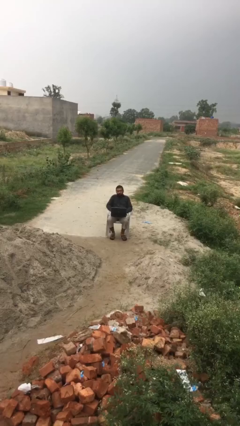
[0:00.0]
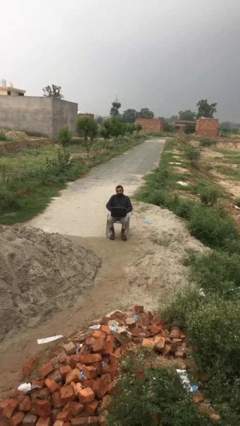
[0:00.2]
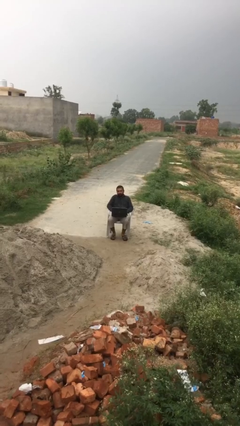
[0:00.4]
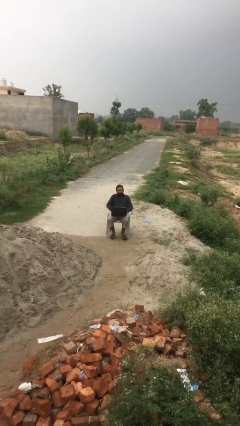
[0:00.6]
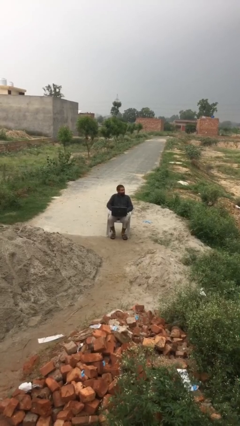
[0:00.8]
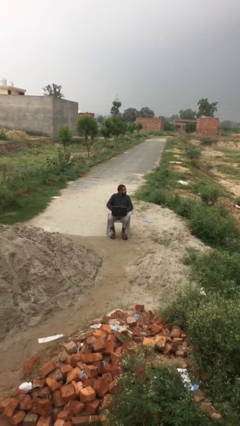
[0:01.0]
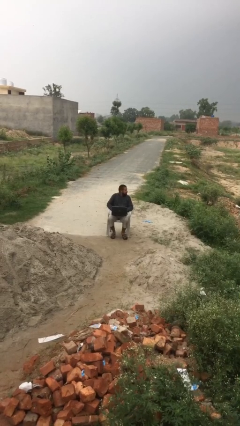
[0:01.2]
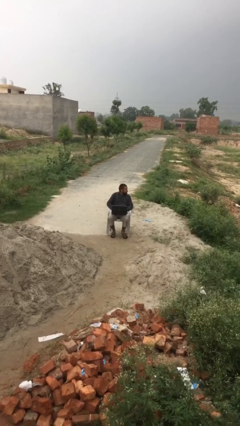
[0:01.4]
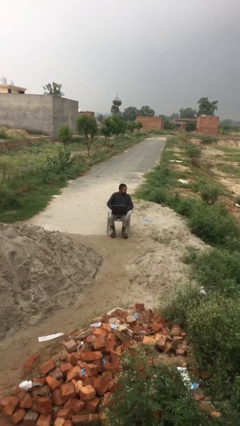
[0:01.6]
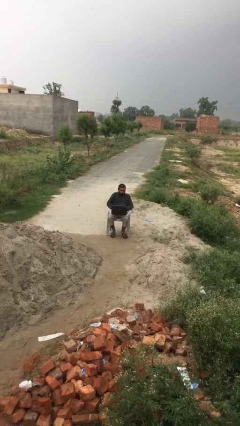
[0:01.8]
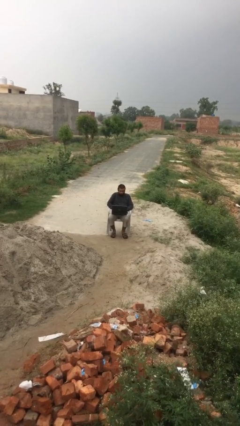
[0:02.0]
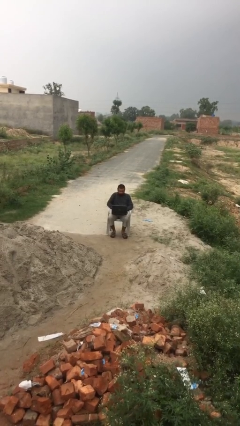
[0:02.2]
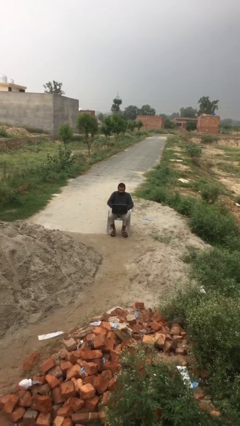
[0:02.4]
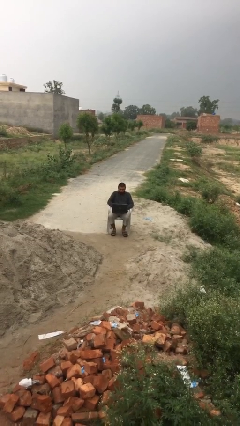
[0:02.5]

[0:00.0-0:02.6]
person interacts with laptop

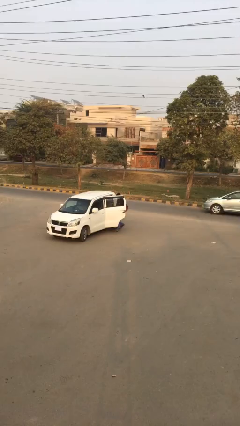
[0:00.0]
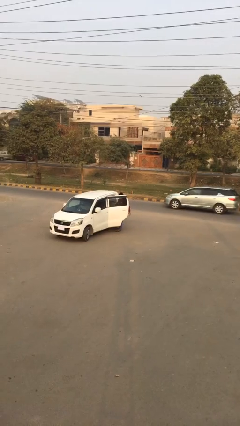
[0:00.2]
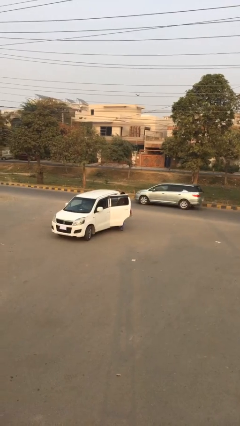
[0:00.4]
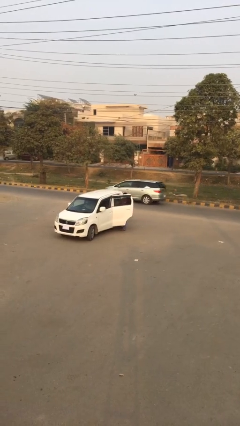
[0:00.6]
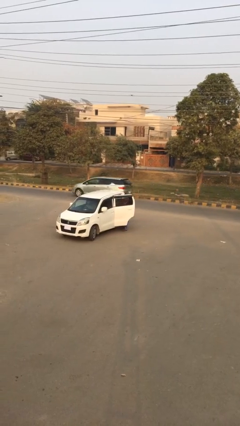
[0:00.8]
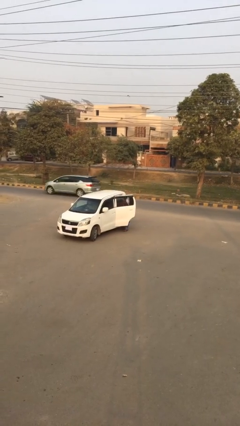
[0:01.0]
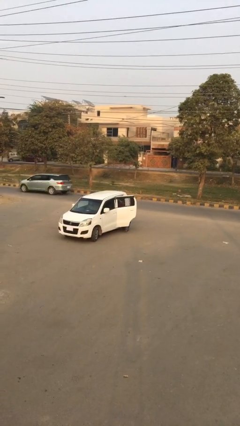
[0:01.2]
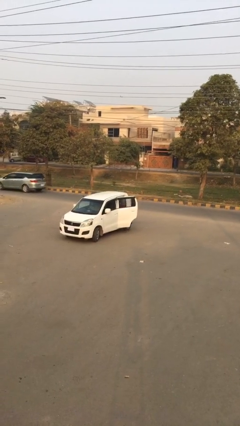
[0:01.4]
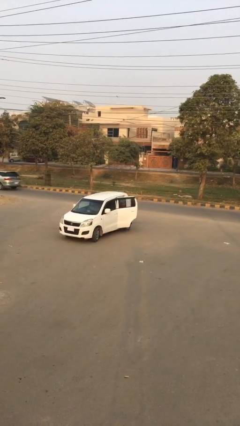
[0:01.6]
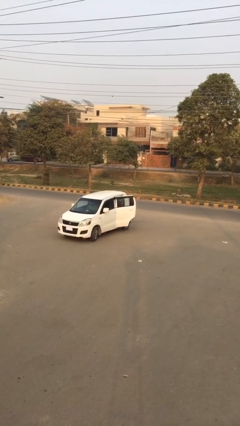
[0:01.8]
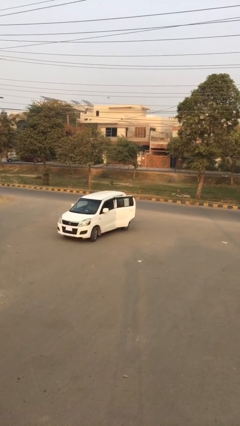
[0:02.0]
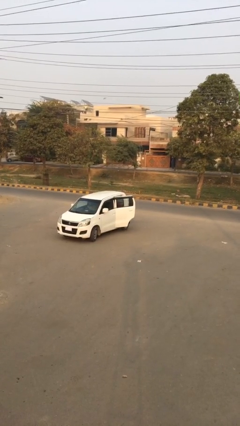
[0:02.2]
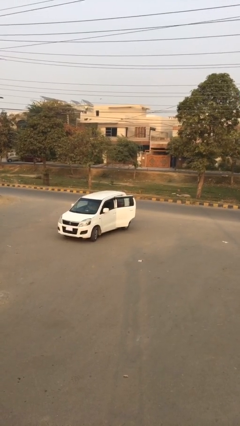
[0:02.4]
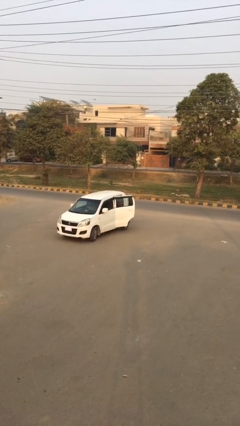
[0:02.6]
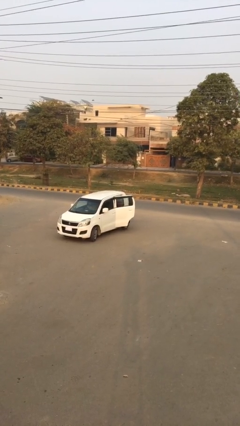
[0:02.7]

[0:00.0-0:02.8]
person enters car

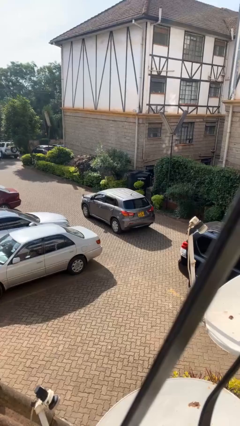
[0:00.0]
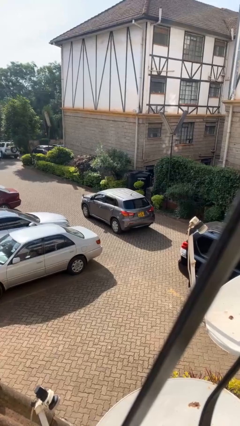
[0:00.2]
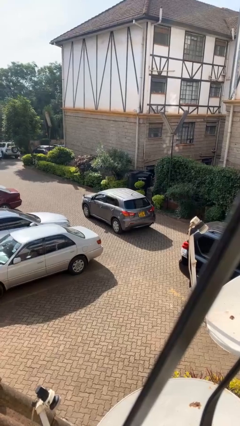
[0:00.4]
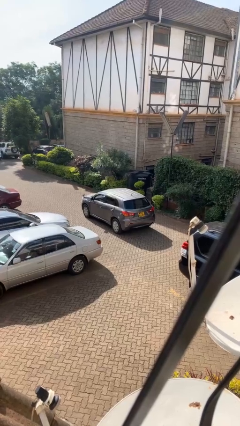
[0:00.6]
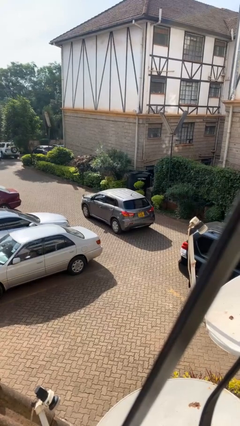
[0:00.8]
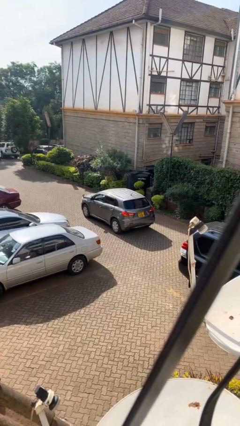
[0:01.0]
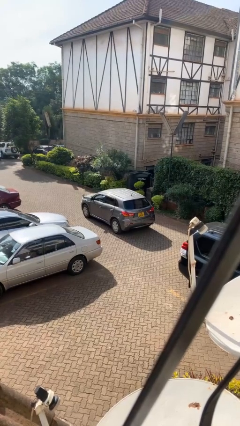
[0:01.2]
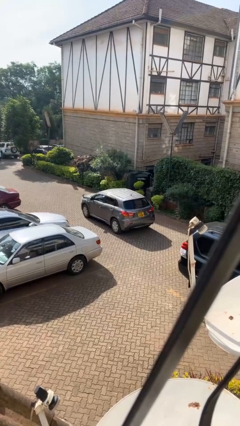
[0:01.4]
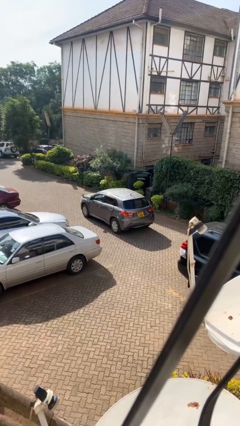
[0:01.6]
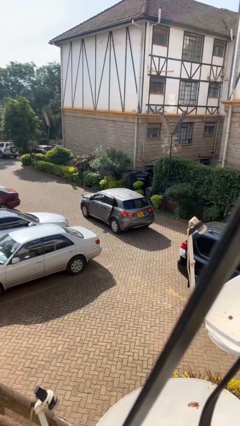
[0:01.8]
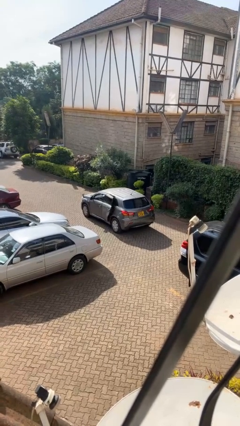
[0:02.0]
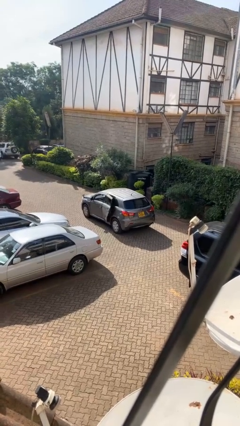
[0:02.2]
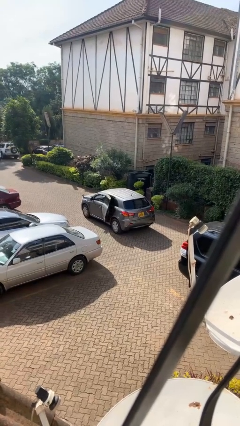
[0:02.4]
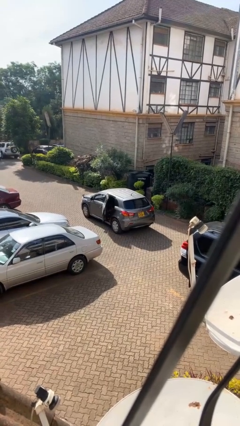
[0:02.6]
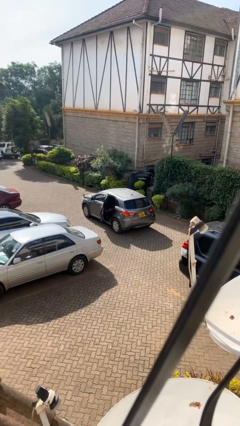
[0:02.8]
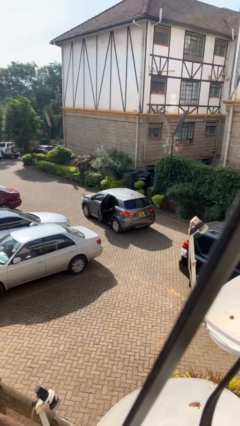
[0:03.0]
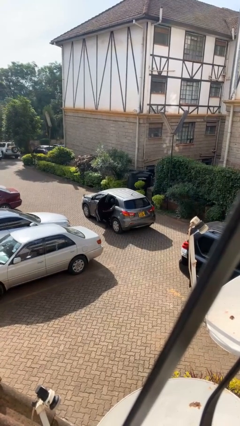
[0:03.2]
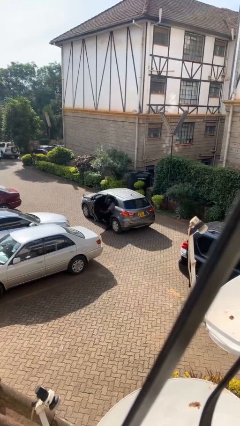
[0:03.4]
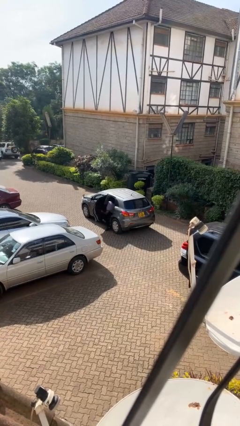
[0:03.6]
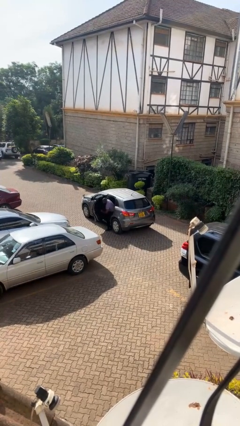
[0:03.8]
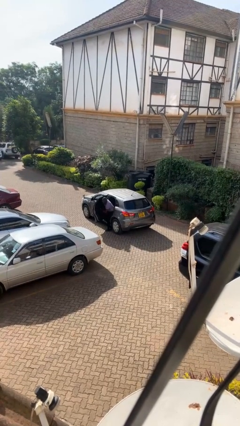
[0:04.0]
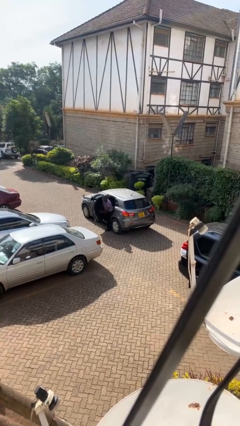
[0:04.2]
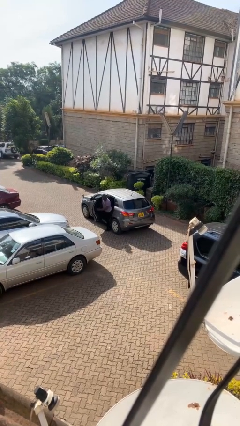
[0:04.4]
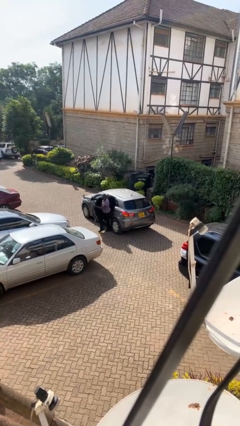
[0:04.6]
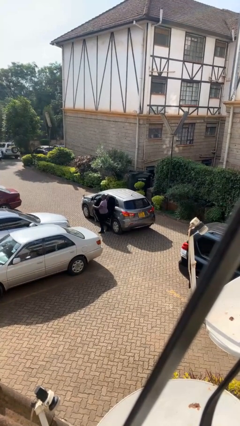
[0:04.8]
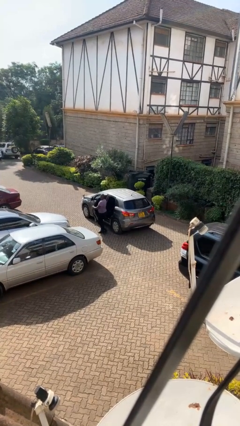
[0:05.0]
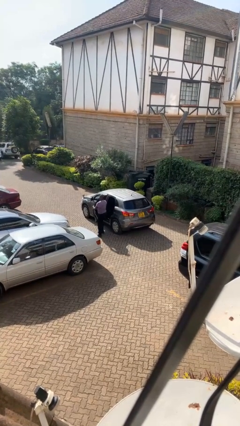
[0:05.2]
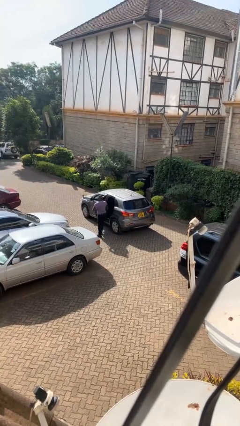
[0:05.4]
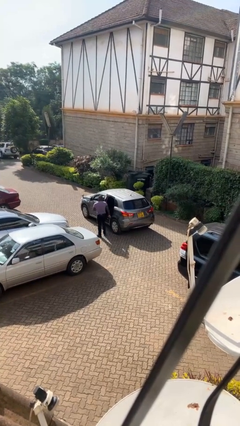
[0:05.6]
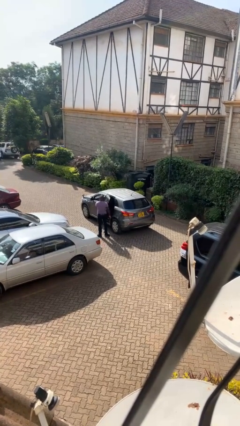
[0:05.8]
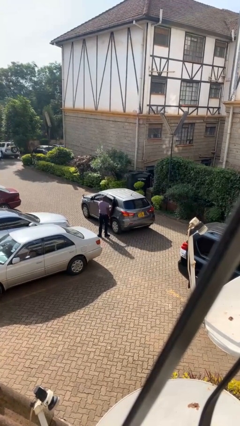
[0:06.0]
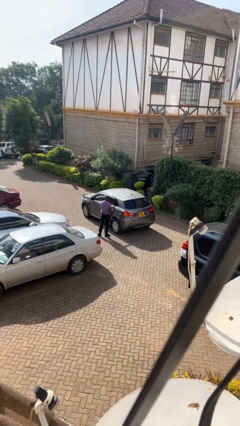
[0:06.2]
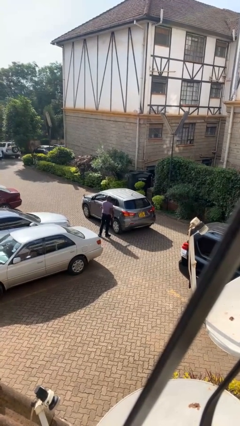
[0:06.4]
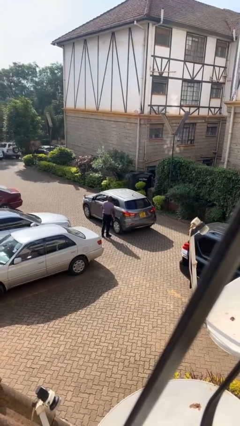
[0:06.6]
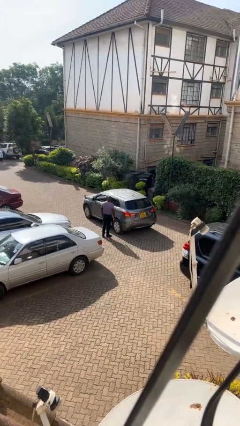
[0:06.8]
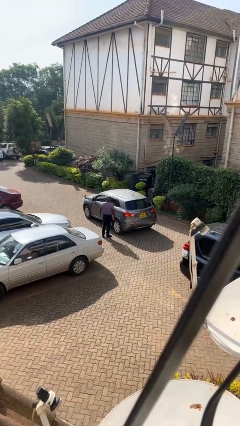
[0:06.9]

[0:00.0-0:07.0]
car drops off person

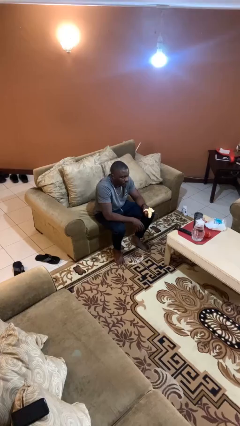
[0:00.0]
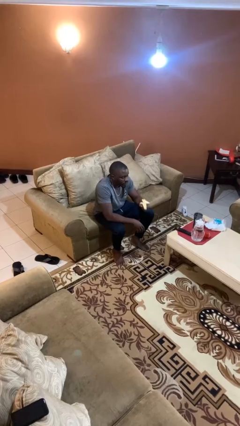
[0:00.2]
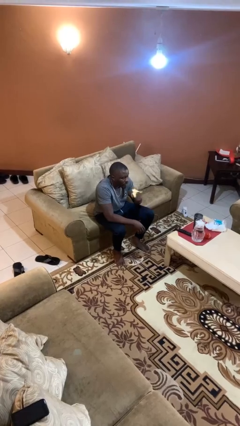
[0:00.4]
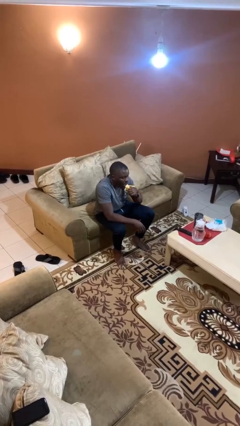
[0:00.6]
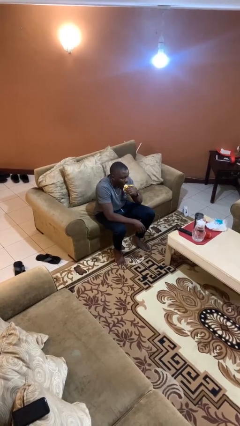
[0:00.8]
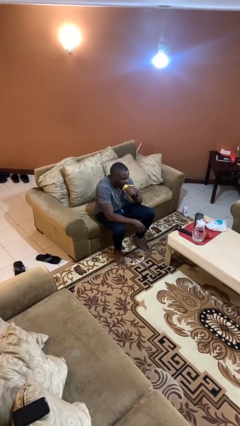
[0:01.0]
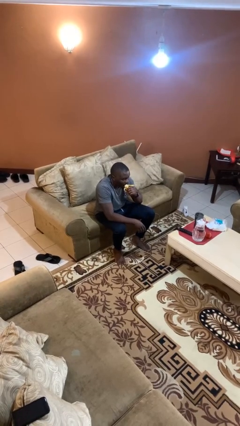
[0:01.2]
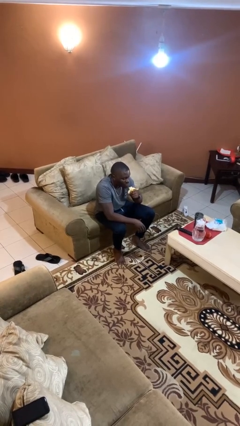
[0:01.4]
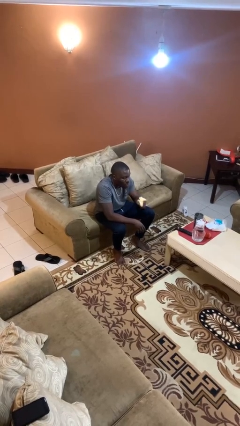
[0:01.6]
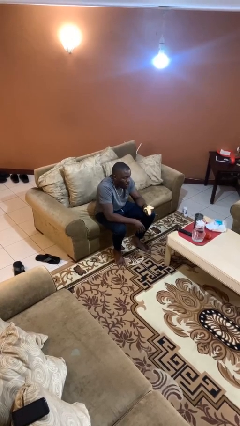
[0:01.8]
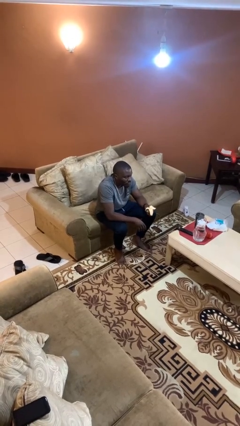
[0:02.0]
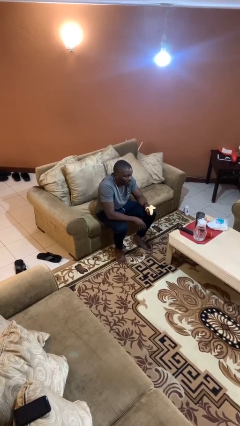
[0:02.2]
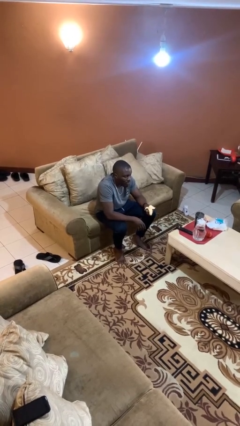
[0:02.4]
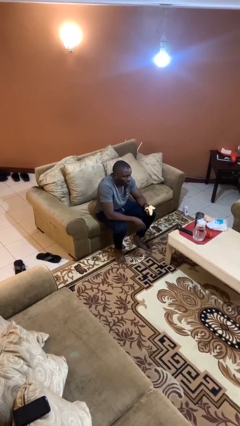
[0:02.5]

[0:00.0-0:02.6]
person eats banana

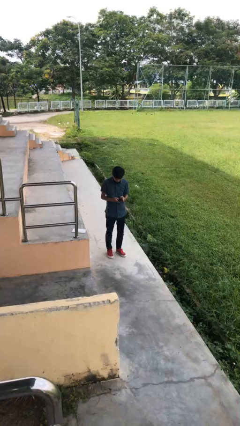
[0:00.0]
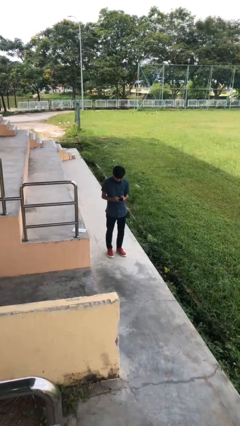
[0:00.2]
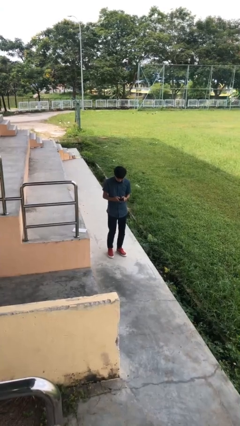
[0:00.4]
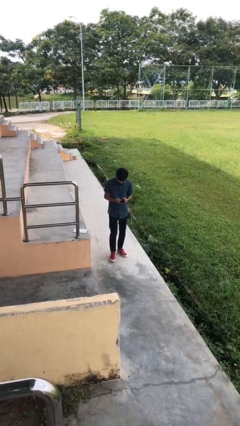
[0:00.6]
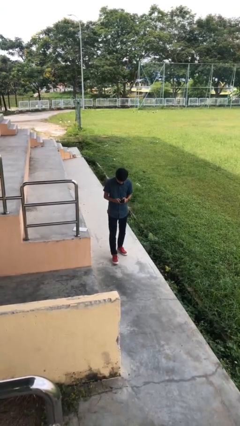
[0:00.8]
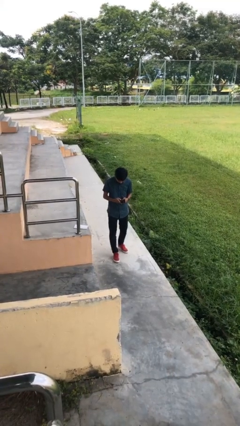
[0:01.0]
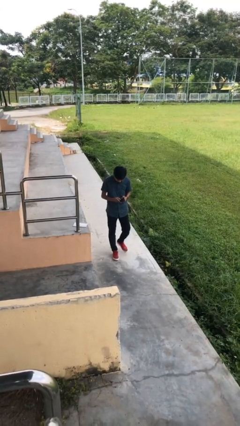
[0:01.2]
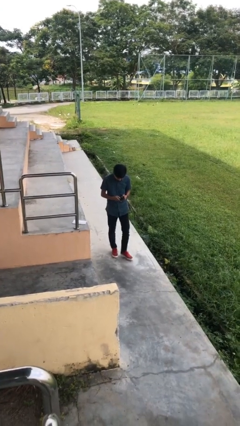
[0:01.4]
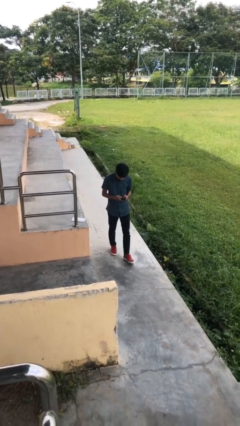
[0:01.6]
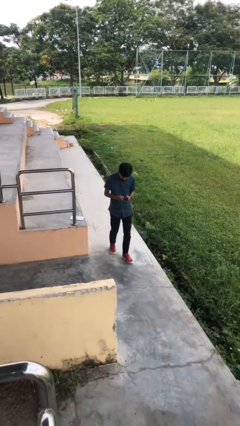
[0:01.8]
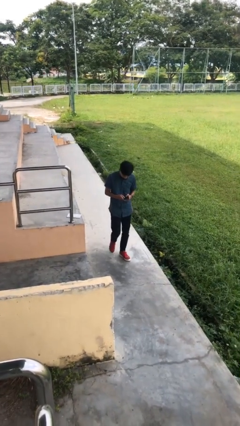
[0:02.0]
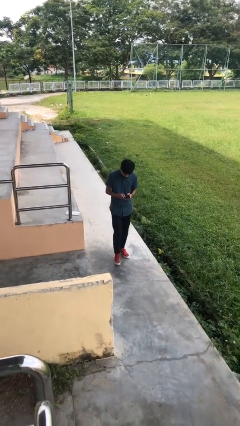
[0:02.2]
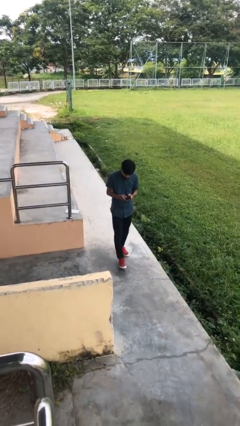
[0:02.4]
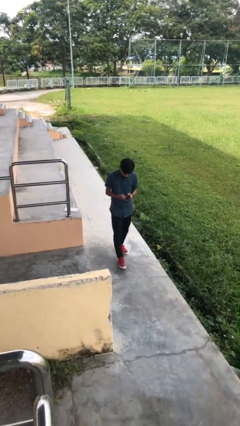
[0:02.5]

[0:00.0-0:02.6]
person texts on phone

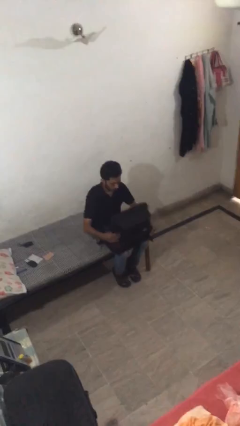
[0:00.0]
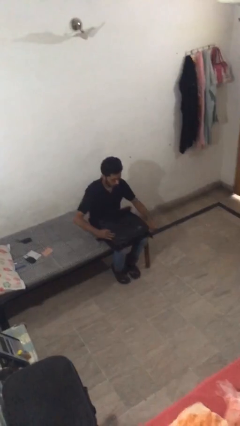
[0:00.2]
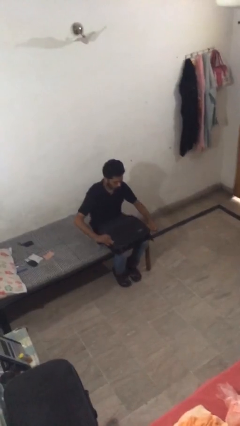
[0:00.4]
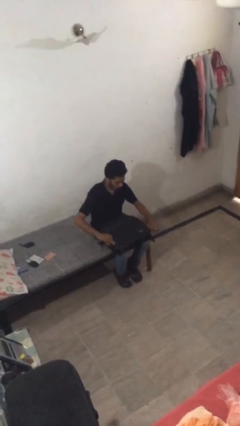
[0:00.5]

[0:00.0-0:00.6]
person opens suitcase
